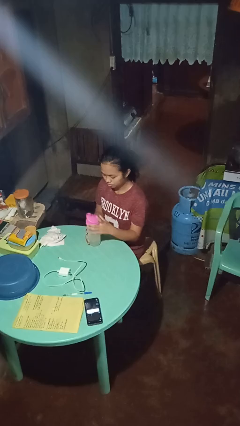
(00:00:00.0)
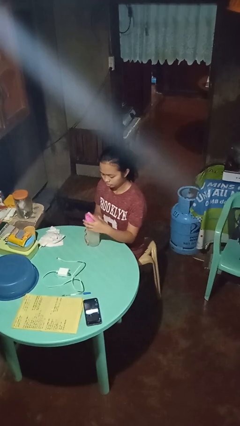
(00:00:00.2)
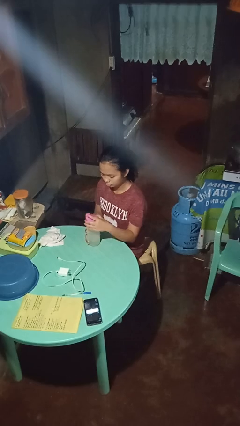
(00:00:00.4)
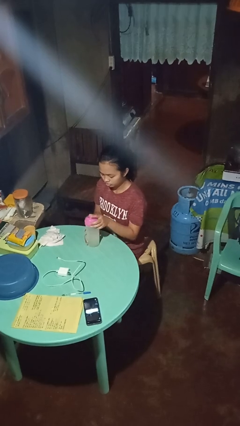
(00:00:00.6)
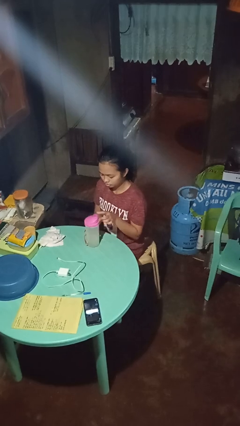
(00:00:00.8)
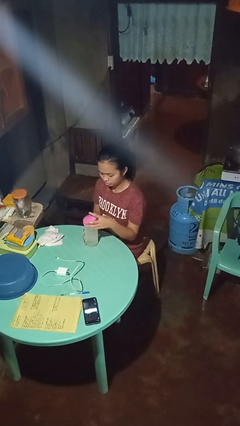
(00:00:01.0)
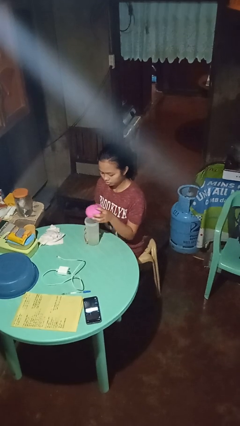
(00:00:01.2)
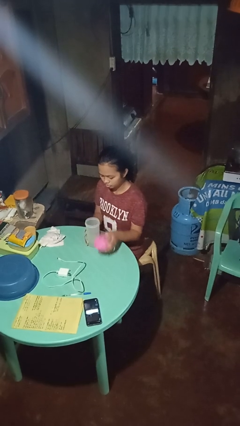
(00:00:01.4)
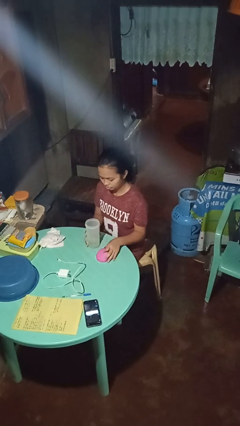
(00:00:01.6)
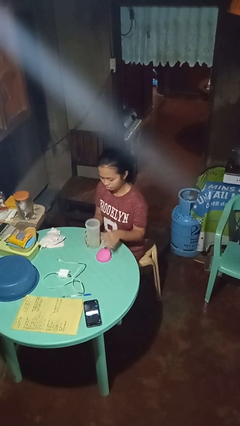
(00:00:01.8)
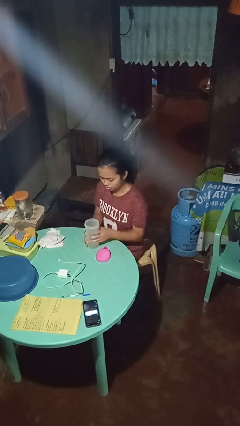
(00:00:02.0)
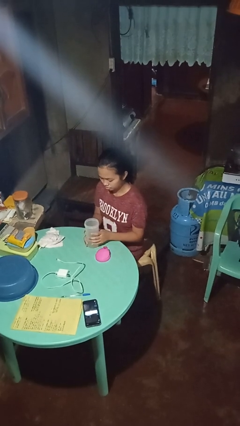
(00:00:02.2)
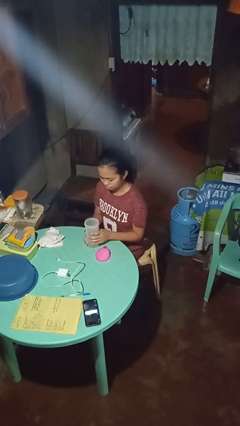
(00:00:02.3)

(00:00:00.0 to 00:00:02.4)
person unscrews lid from bottle

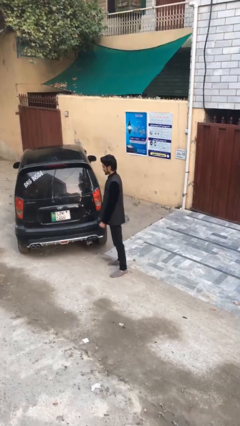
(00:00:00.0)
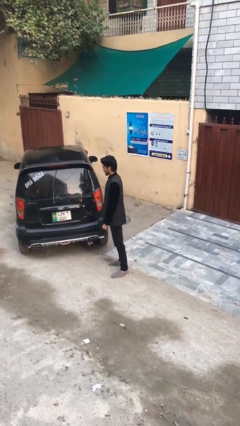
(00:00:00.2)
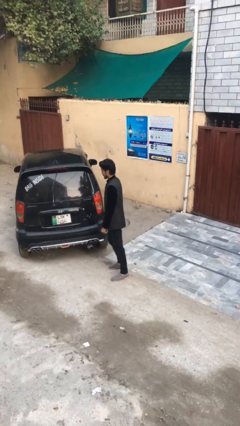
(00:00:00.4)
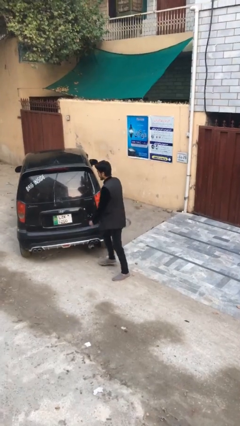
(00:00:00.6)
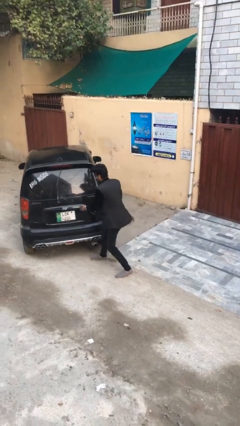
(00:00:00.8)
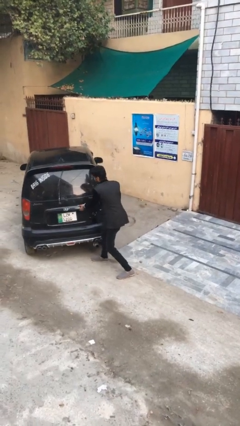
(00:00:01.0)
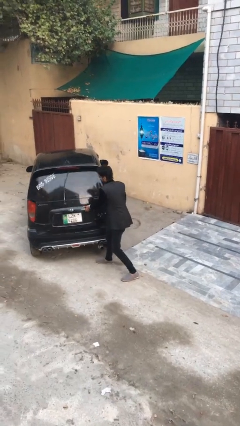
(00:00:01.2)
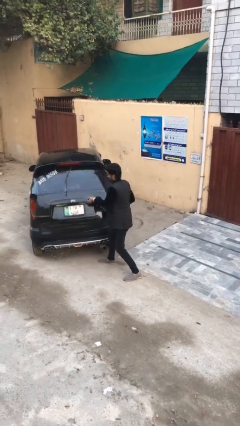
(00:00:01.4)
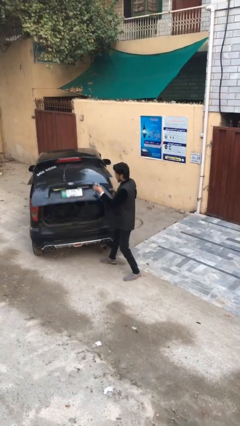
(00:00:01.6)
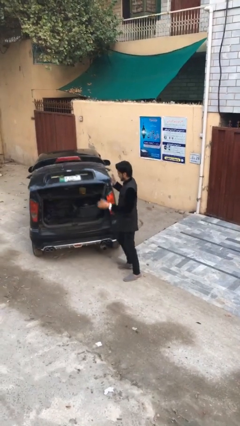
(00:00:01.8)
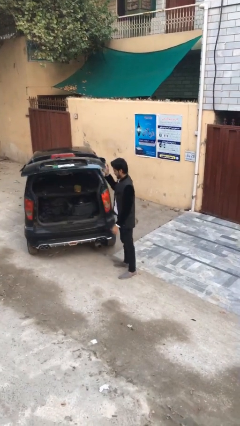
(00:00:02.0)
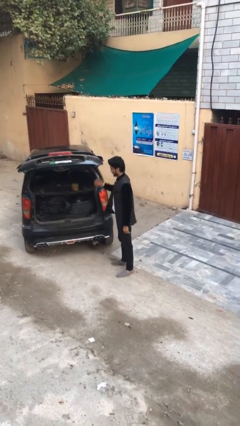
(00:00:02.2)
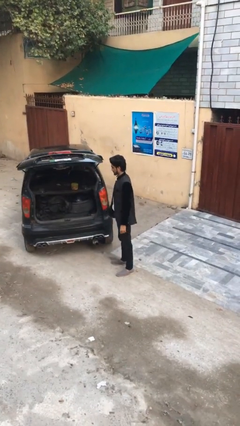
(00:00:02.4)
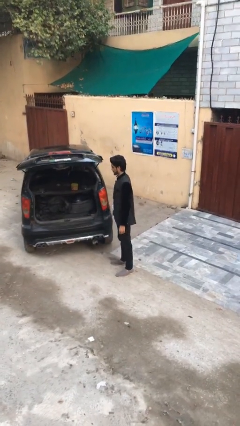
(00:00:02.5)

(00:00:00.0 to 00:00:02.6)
person opens car trunk

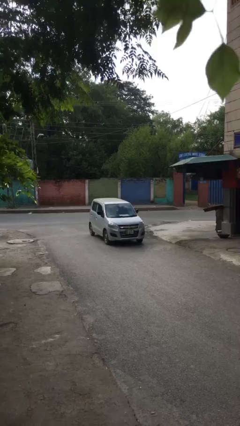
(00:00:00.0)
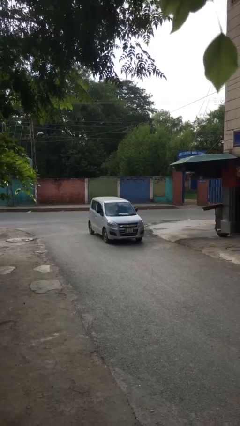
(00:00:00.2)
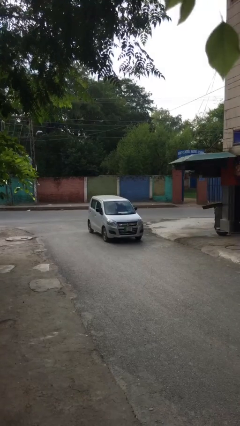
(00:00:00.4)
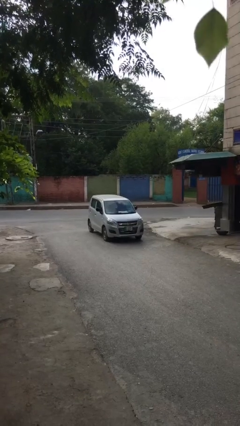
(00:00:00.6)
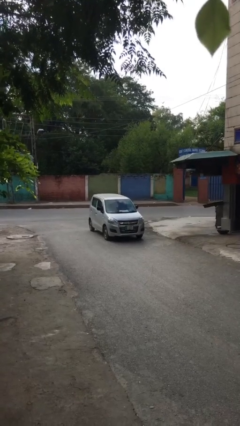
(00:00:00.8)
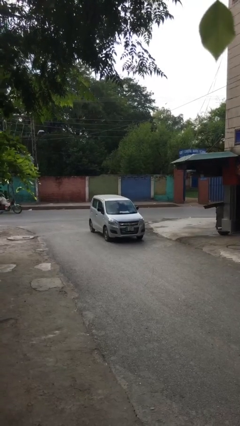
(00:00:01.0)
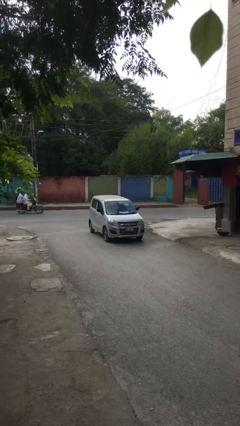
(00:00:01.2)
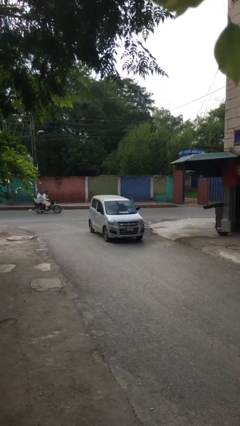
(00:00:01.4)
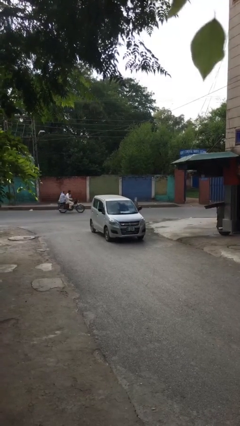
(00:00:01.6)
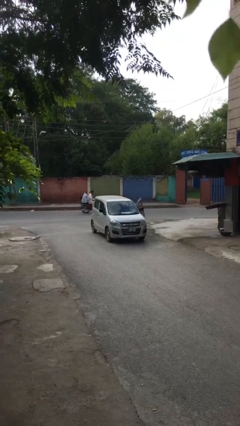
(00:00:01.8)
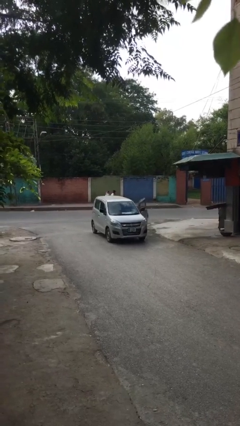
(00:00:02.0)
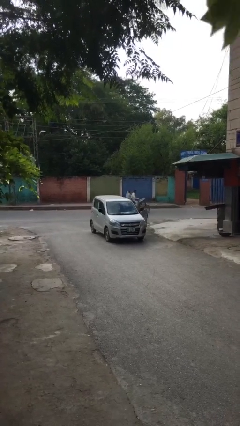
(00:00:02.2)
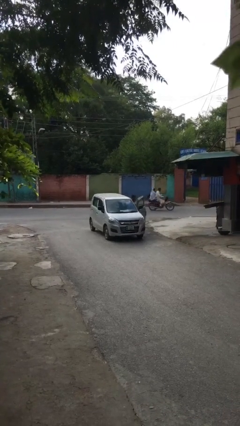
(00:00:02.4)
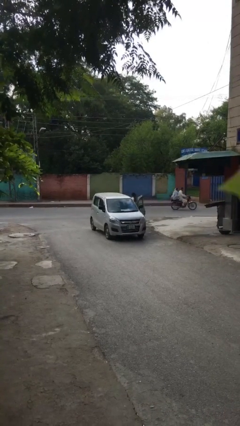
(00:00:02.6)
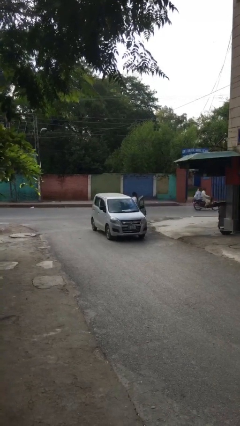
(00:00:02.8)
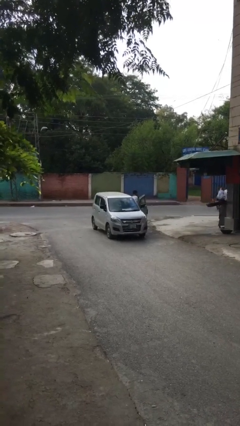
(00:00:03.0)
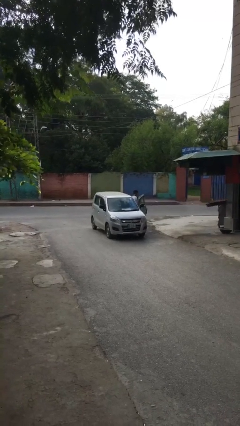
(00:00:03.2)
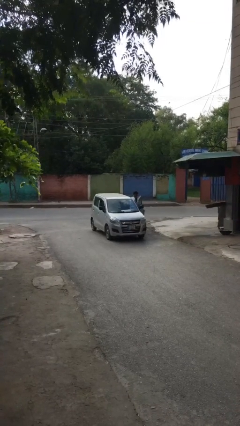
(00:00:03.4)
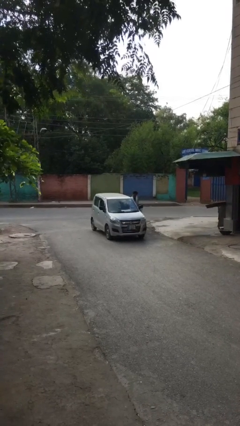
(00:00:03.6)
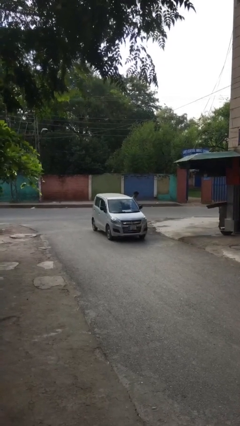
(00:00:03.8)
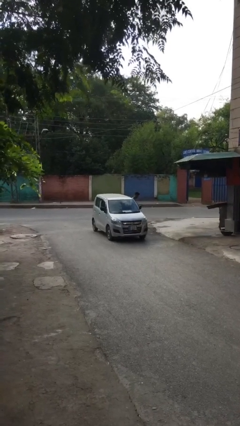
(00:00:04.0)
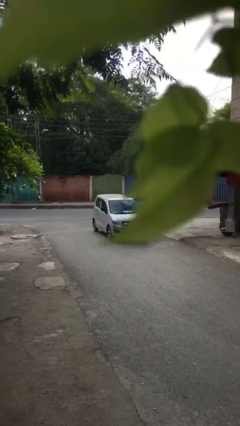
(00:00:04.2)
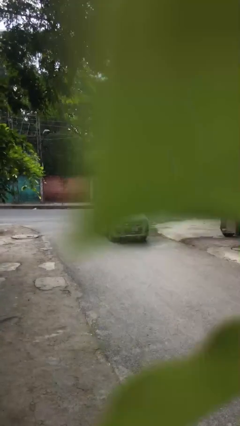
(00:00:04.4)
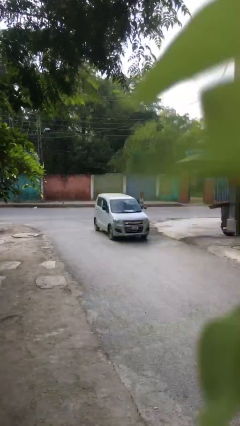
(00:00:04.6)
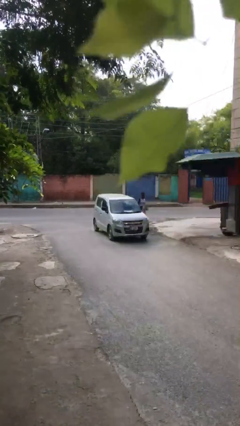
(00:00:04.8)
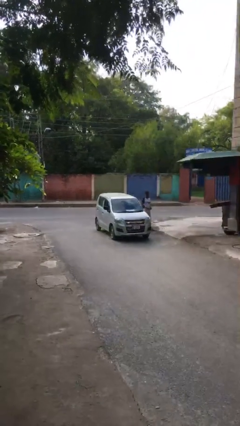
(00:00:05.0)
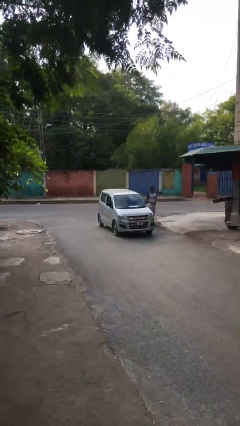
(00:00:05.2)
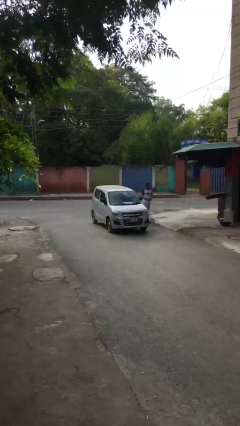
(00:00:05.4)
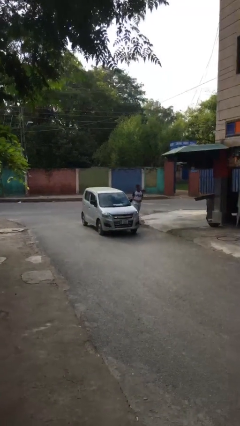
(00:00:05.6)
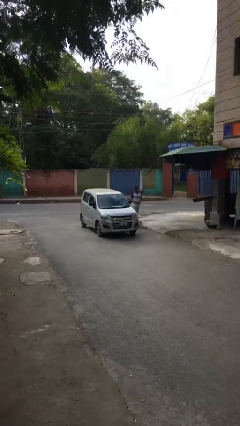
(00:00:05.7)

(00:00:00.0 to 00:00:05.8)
car drops off person

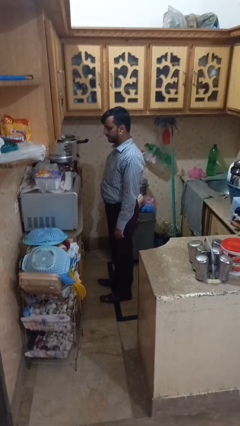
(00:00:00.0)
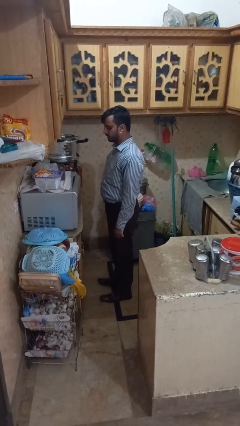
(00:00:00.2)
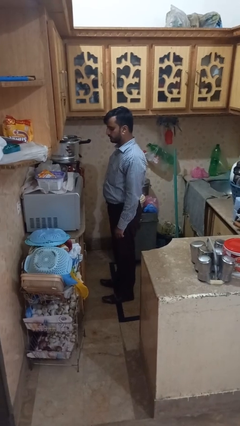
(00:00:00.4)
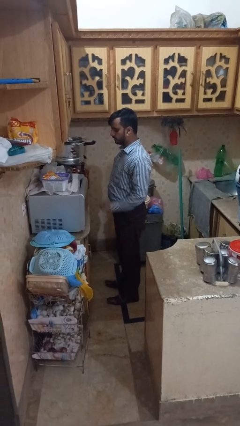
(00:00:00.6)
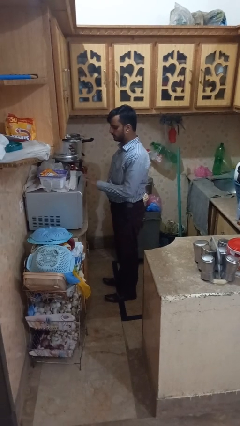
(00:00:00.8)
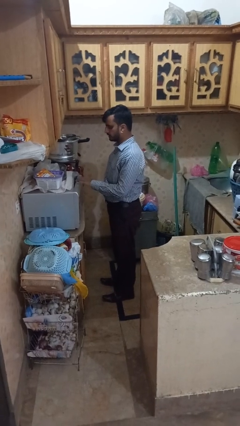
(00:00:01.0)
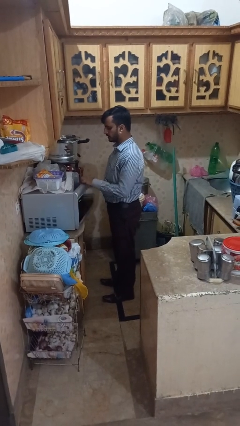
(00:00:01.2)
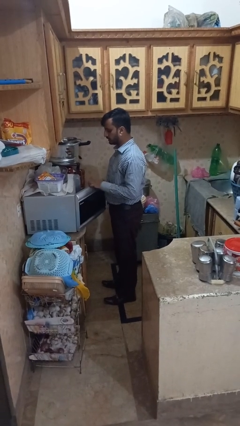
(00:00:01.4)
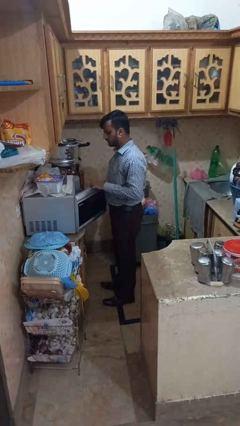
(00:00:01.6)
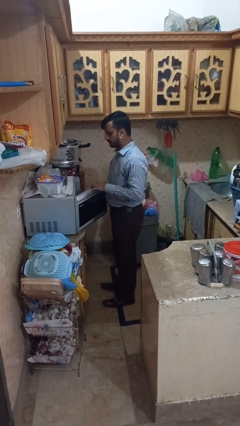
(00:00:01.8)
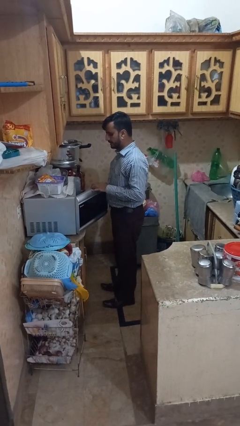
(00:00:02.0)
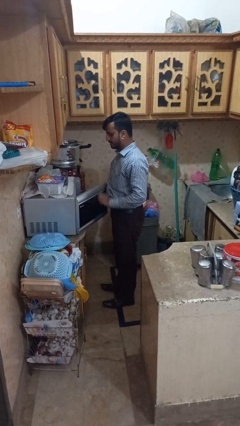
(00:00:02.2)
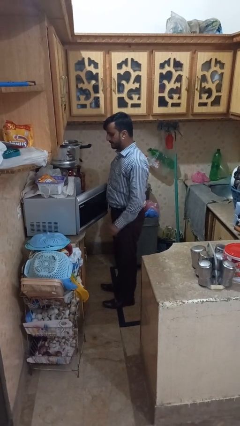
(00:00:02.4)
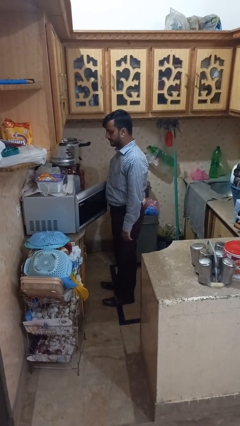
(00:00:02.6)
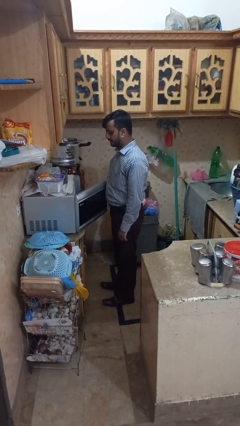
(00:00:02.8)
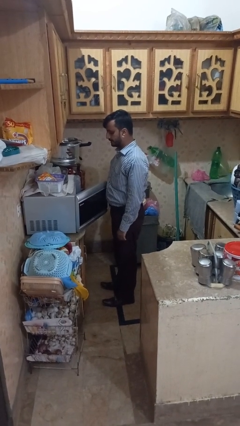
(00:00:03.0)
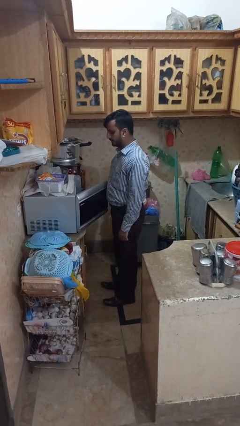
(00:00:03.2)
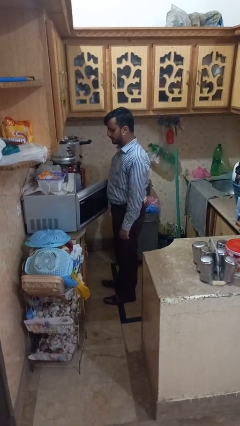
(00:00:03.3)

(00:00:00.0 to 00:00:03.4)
person opens microwave

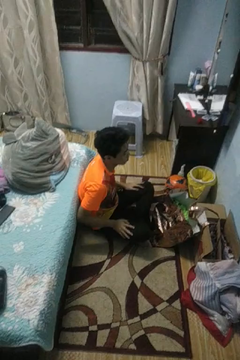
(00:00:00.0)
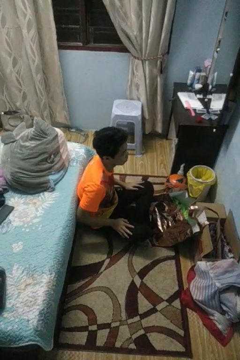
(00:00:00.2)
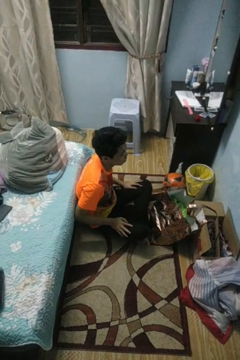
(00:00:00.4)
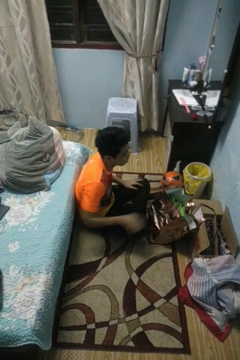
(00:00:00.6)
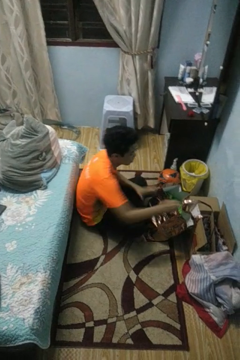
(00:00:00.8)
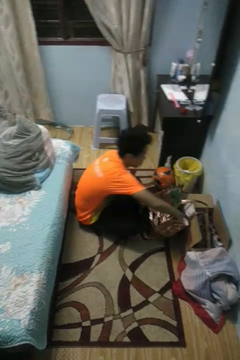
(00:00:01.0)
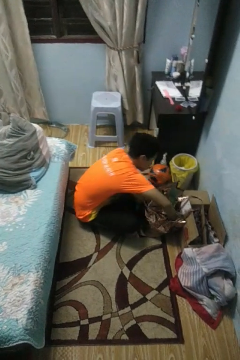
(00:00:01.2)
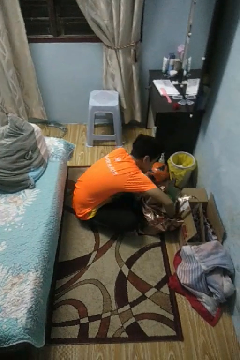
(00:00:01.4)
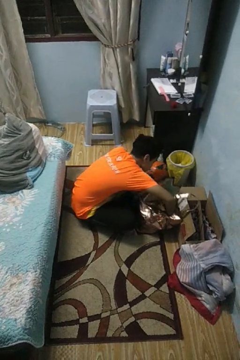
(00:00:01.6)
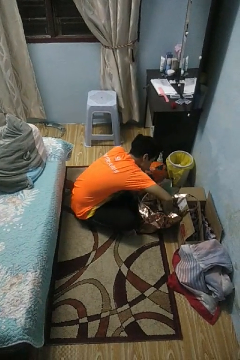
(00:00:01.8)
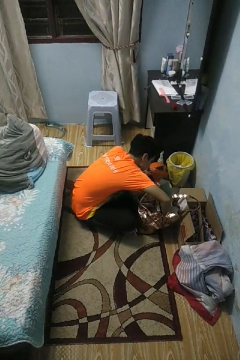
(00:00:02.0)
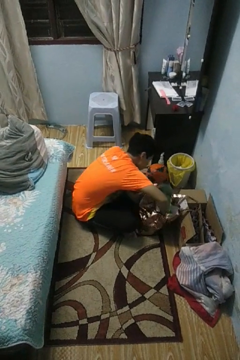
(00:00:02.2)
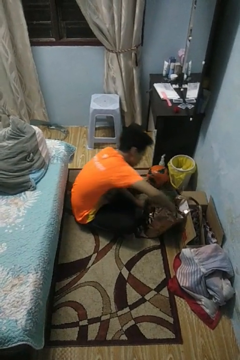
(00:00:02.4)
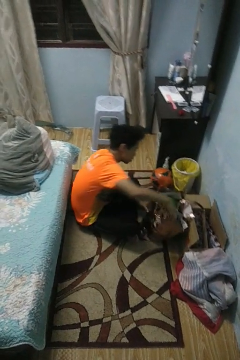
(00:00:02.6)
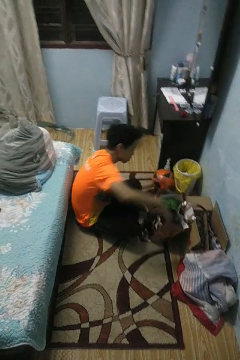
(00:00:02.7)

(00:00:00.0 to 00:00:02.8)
person searches in bag

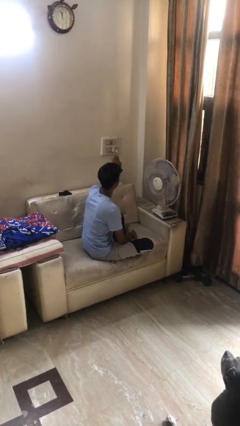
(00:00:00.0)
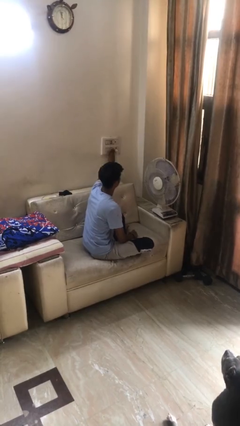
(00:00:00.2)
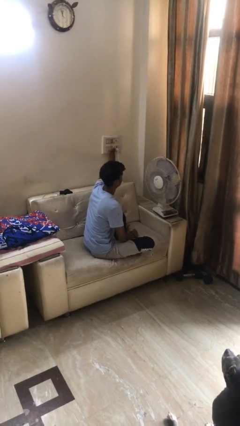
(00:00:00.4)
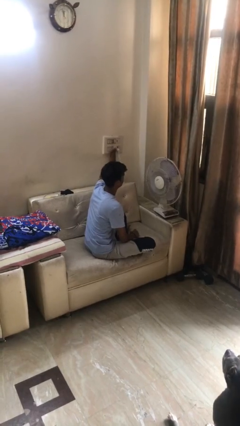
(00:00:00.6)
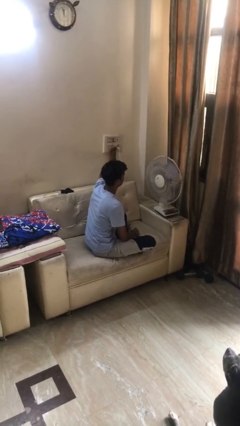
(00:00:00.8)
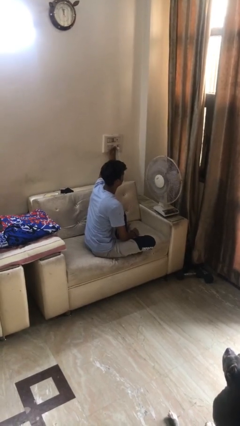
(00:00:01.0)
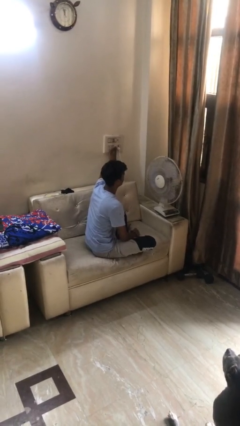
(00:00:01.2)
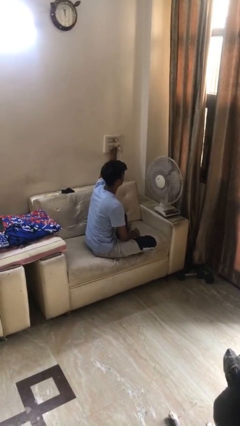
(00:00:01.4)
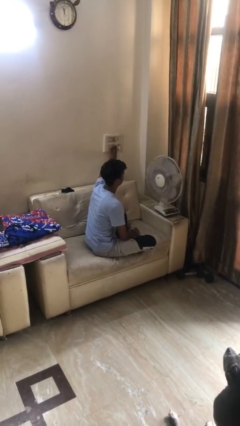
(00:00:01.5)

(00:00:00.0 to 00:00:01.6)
person turns on fan
